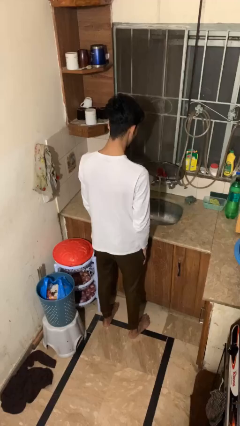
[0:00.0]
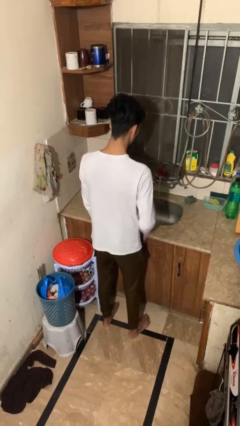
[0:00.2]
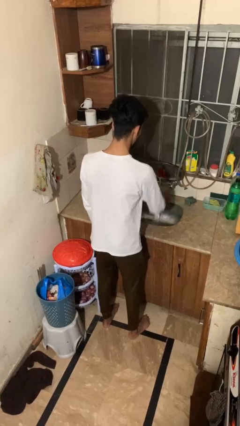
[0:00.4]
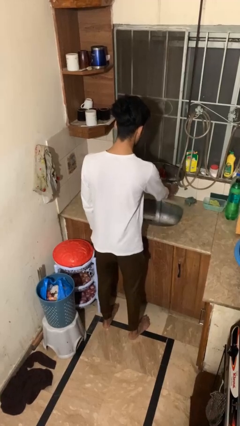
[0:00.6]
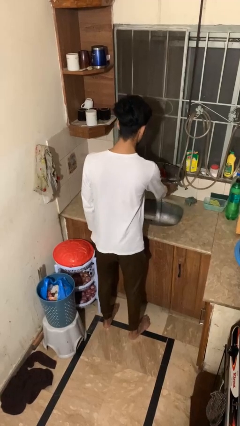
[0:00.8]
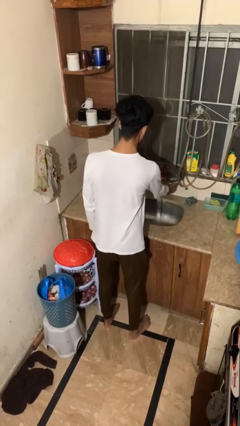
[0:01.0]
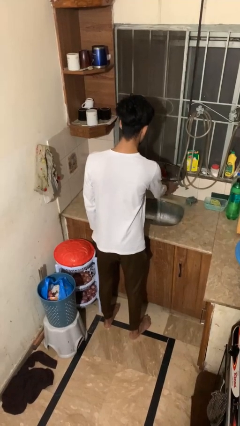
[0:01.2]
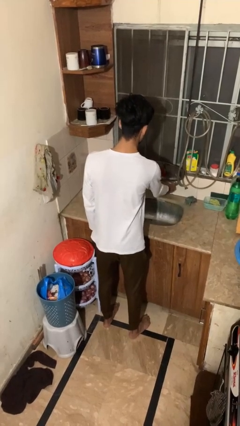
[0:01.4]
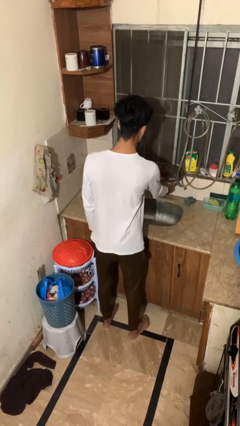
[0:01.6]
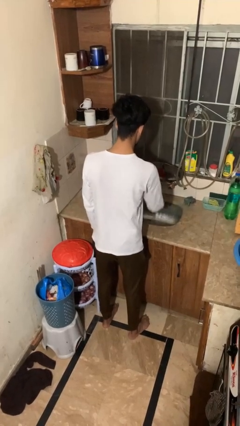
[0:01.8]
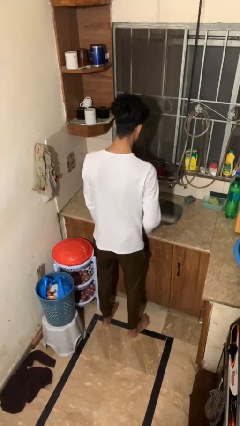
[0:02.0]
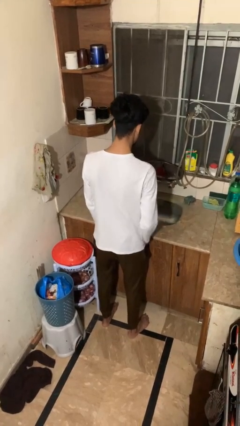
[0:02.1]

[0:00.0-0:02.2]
person turns off faucet

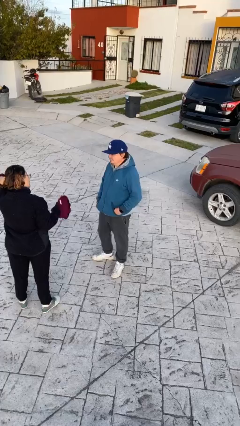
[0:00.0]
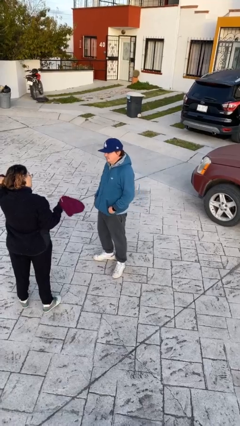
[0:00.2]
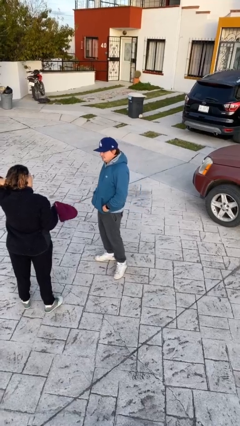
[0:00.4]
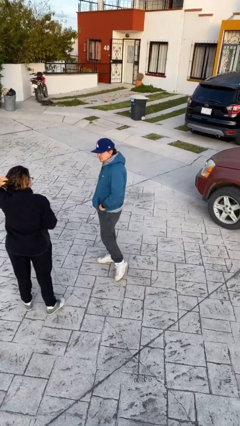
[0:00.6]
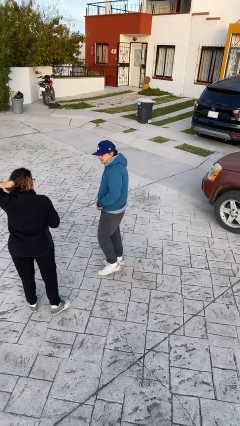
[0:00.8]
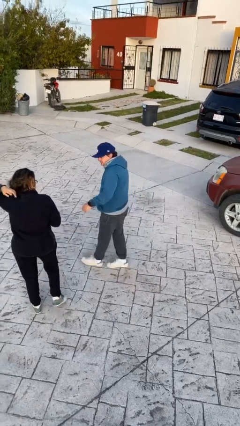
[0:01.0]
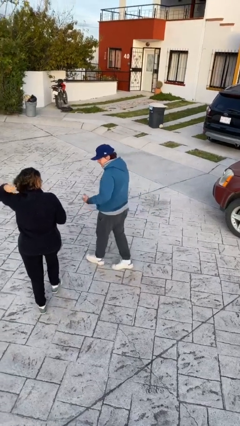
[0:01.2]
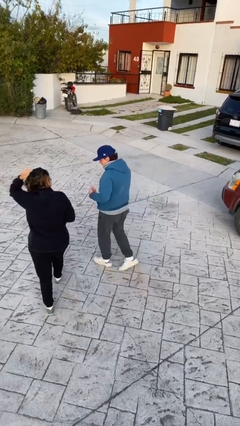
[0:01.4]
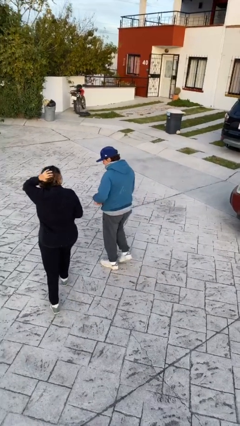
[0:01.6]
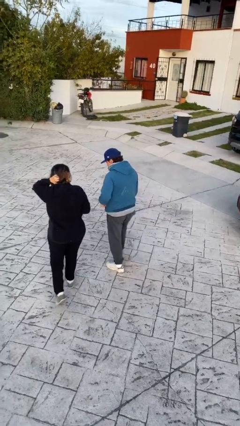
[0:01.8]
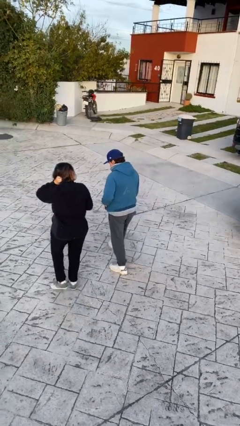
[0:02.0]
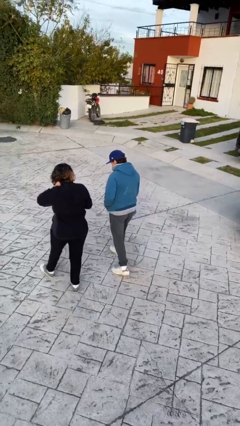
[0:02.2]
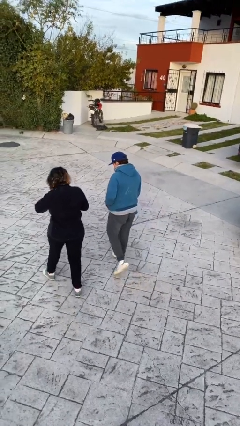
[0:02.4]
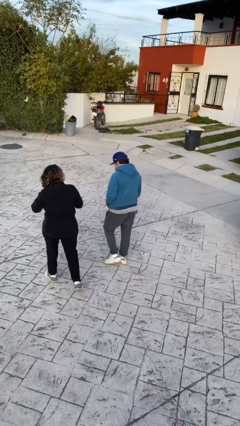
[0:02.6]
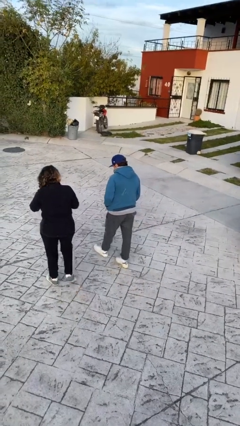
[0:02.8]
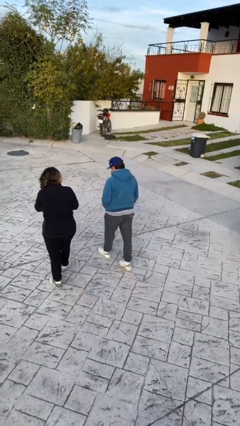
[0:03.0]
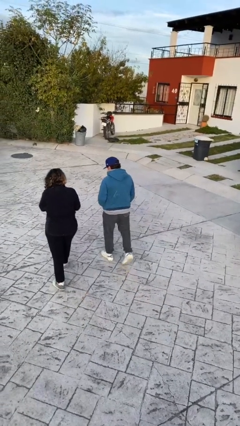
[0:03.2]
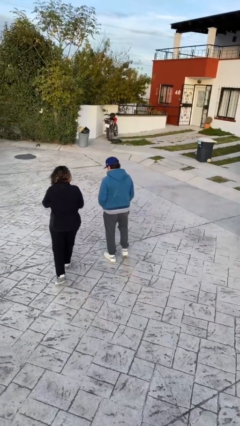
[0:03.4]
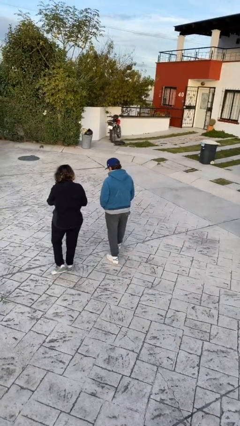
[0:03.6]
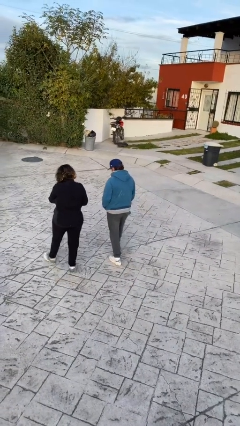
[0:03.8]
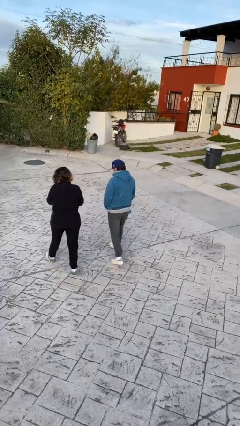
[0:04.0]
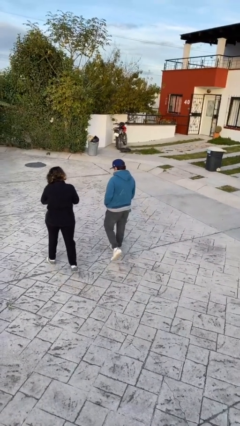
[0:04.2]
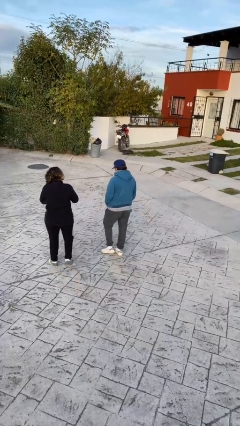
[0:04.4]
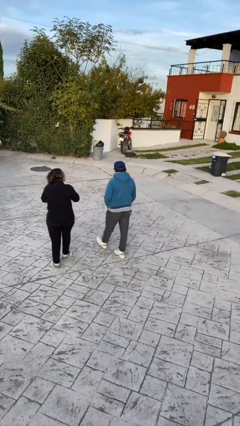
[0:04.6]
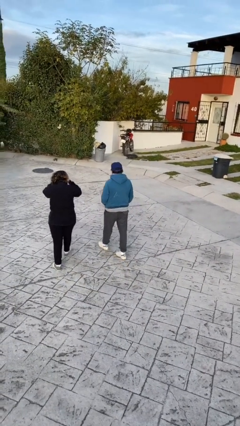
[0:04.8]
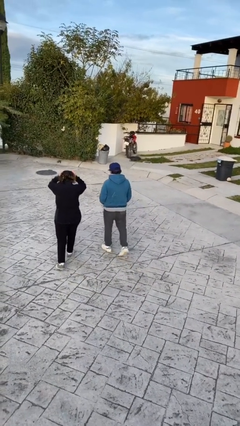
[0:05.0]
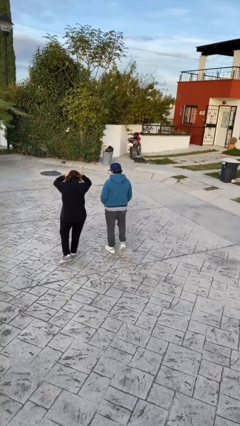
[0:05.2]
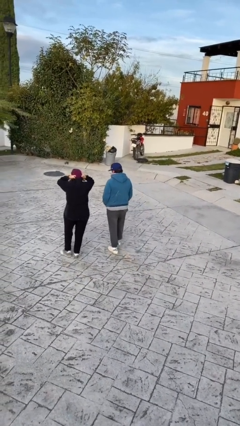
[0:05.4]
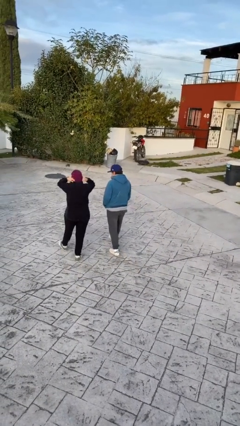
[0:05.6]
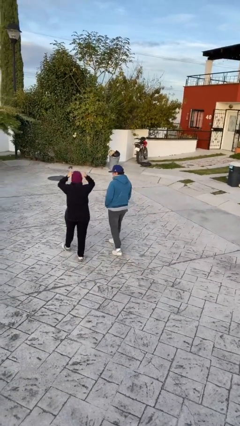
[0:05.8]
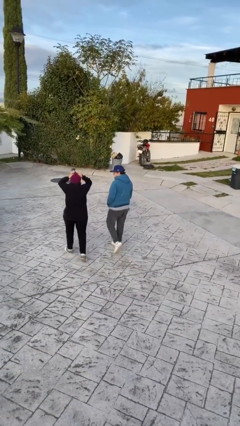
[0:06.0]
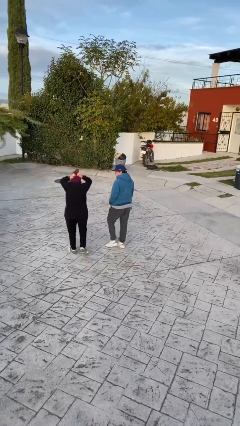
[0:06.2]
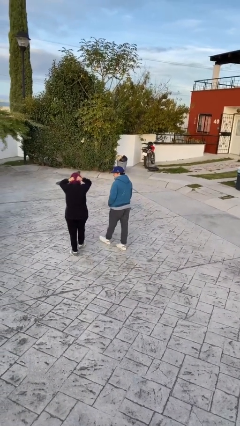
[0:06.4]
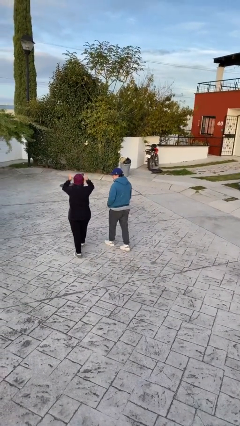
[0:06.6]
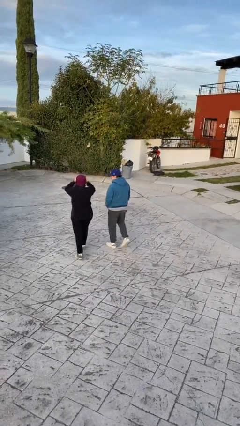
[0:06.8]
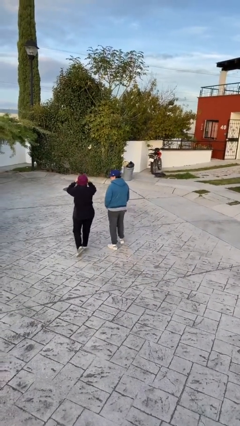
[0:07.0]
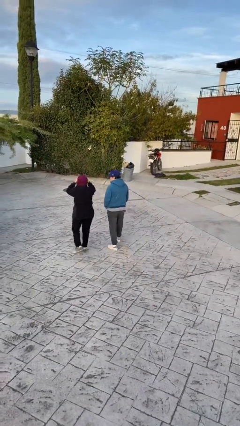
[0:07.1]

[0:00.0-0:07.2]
person talks to person

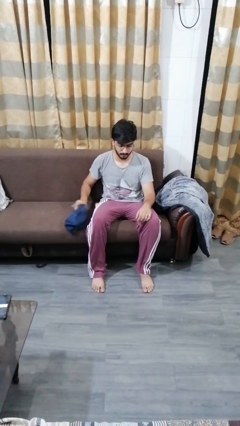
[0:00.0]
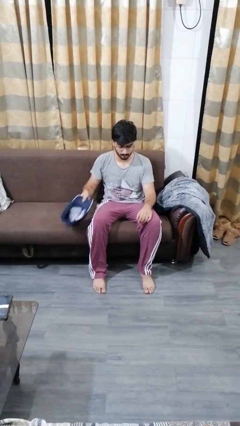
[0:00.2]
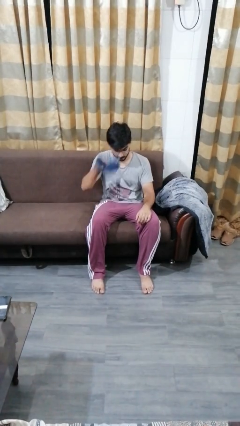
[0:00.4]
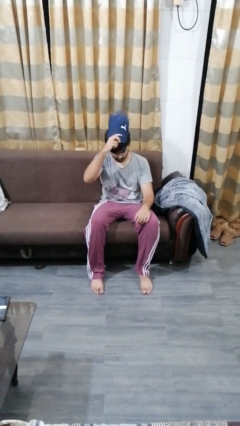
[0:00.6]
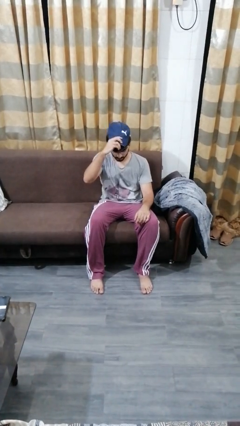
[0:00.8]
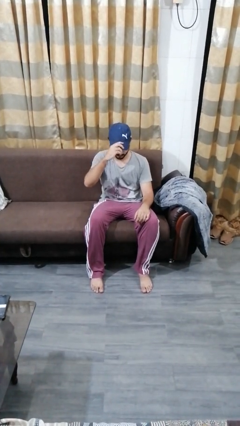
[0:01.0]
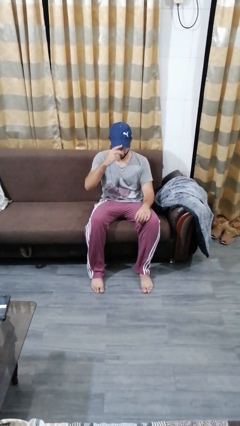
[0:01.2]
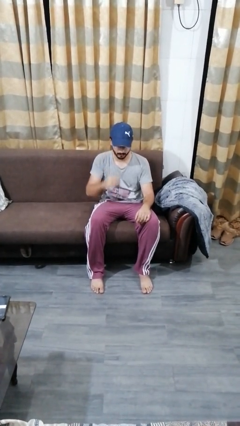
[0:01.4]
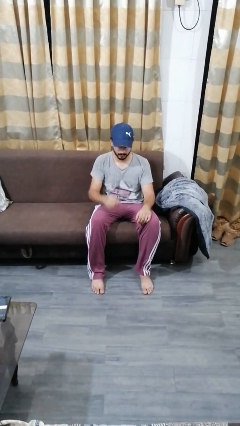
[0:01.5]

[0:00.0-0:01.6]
person puts on hat

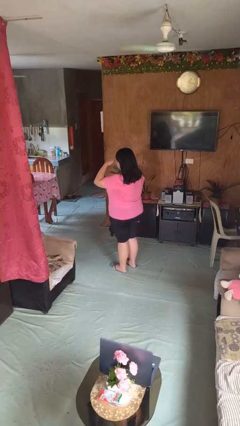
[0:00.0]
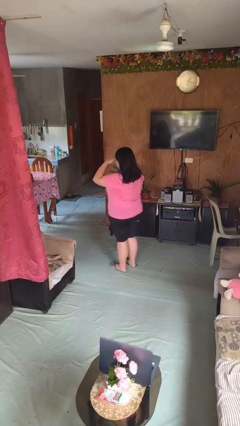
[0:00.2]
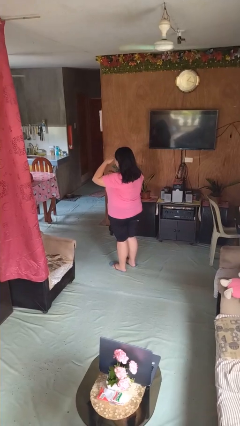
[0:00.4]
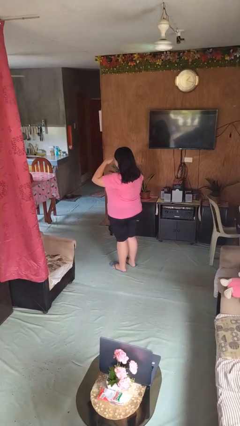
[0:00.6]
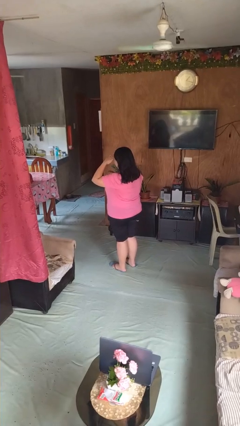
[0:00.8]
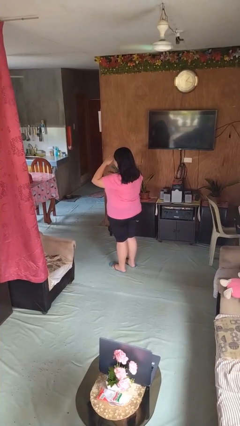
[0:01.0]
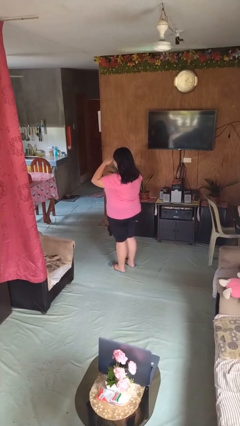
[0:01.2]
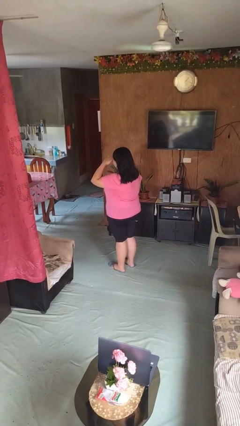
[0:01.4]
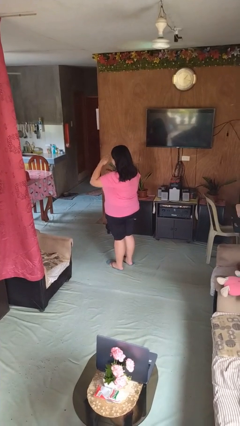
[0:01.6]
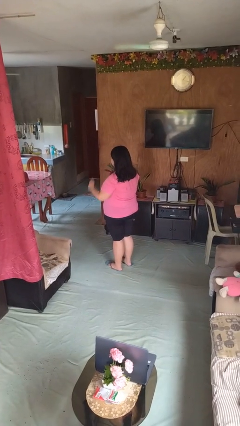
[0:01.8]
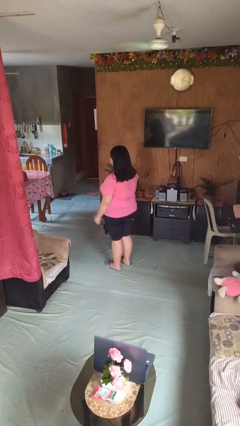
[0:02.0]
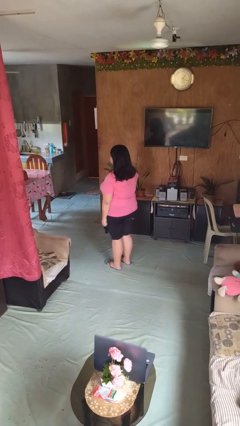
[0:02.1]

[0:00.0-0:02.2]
person salutes

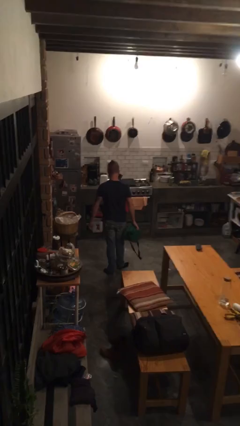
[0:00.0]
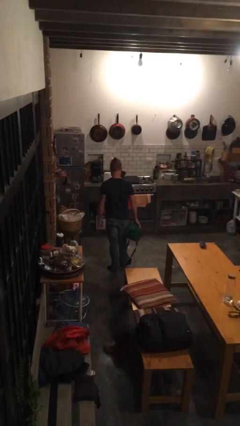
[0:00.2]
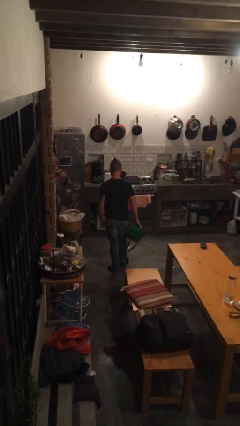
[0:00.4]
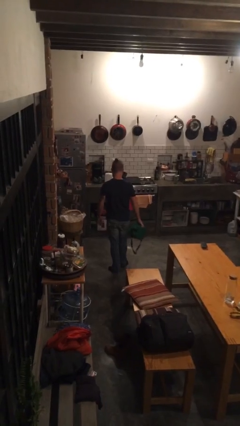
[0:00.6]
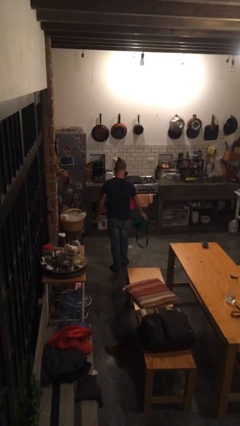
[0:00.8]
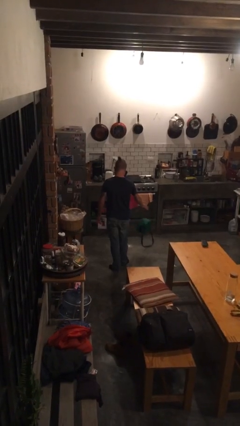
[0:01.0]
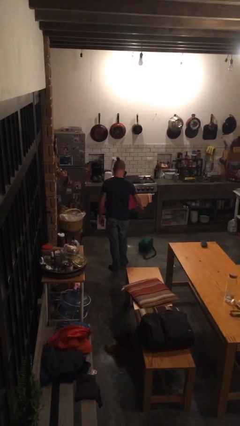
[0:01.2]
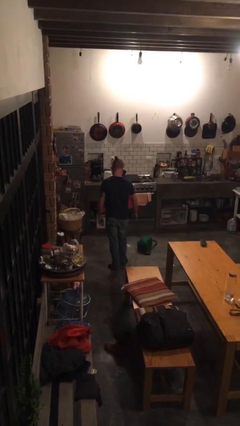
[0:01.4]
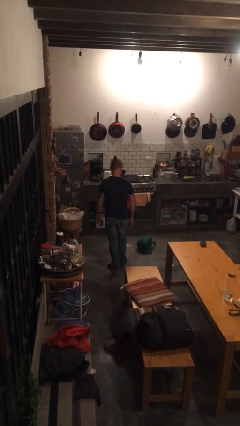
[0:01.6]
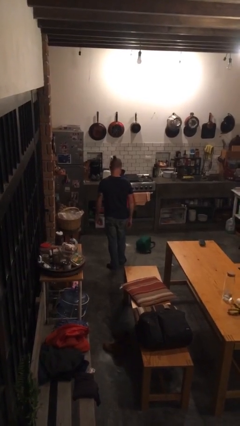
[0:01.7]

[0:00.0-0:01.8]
person throws object to ground

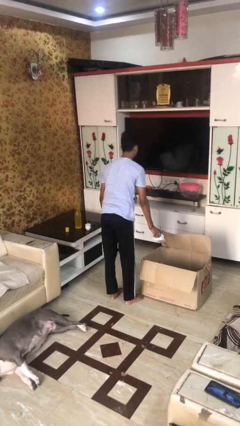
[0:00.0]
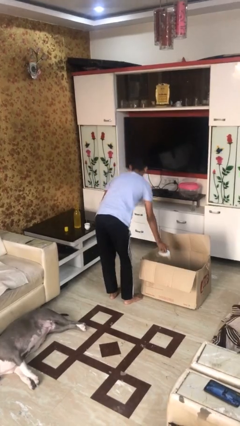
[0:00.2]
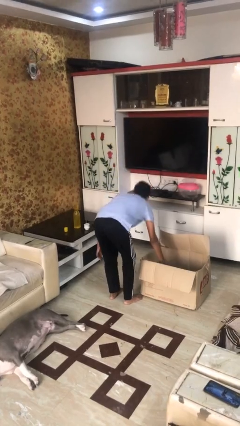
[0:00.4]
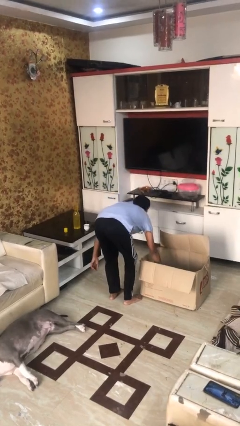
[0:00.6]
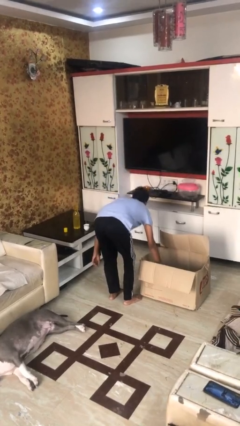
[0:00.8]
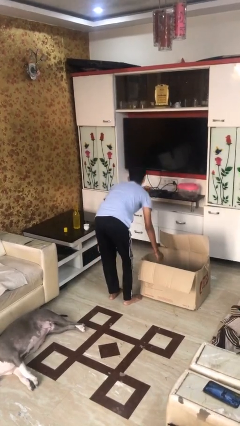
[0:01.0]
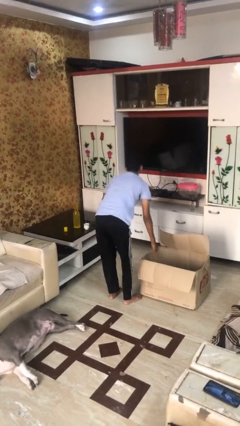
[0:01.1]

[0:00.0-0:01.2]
person puts object into box

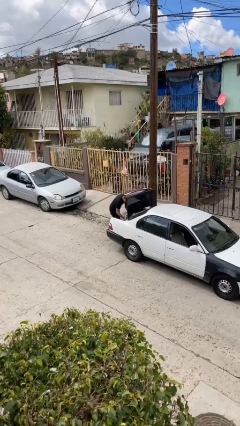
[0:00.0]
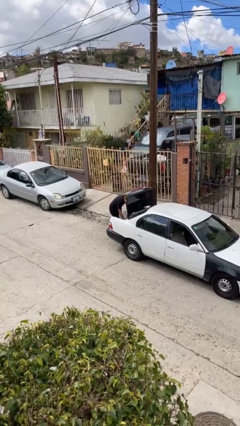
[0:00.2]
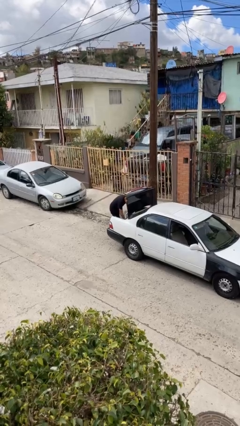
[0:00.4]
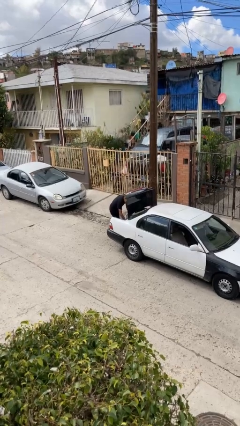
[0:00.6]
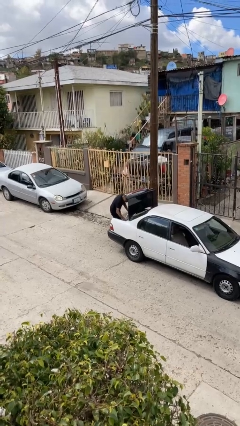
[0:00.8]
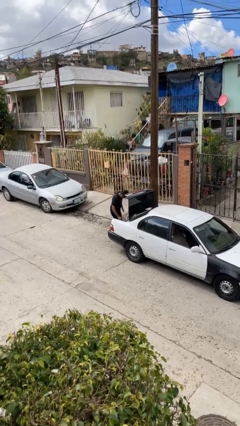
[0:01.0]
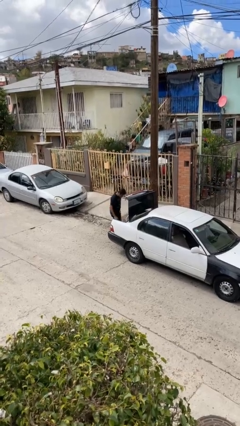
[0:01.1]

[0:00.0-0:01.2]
person loads car
